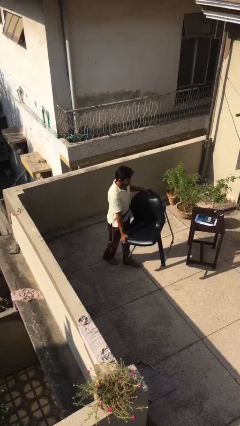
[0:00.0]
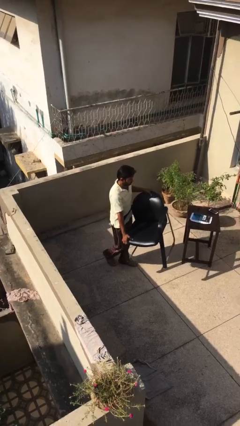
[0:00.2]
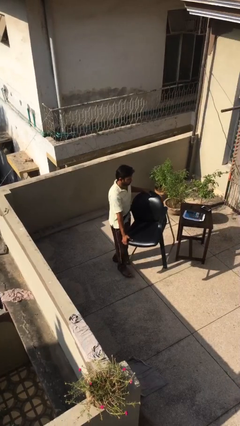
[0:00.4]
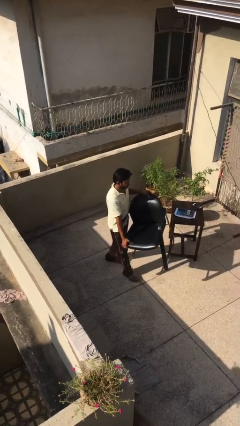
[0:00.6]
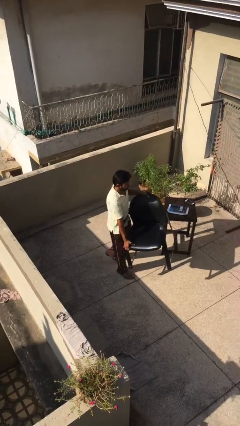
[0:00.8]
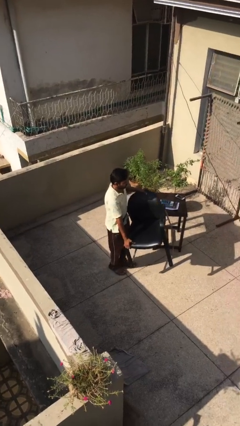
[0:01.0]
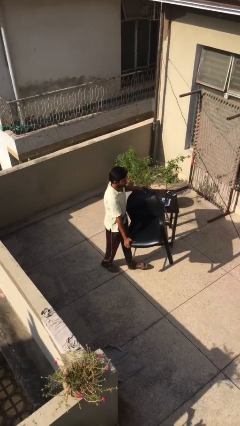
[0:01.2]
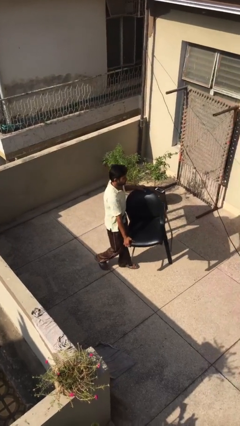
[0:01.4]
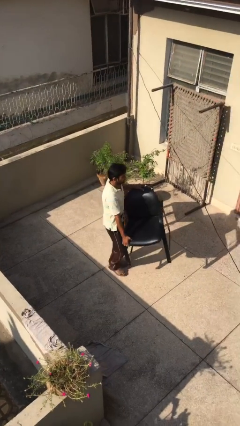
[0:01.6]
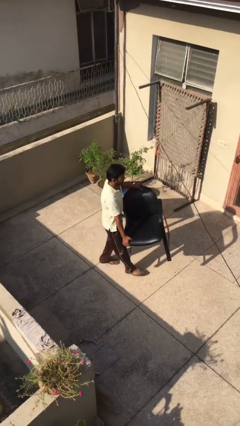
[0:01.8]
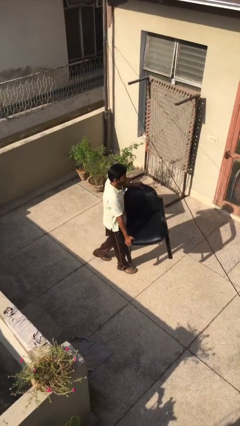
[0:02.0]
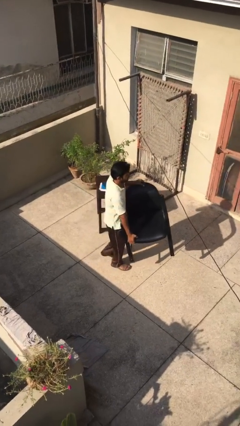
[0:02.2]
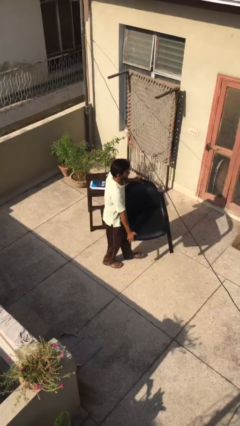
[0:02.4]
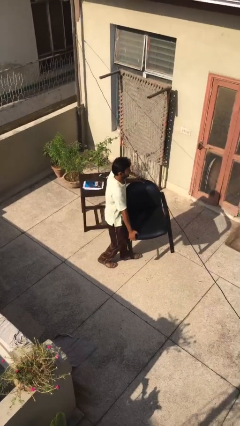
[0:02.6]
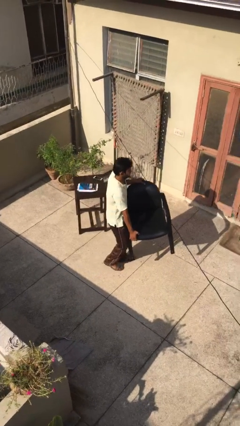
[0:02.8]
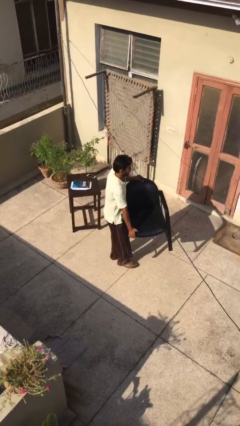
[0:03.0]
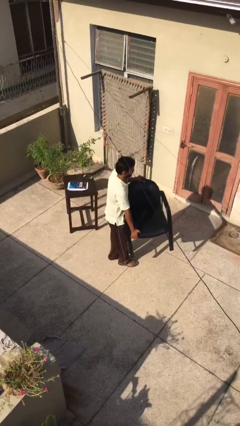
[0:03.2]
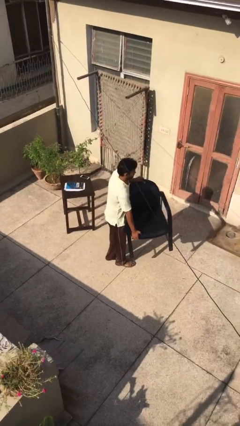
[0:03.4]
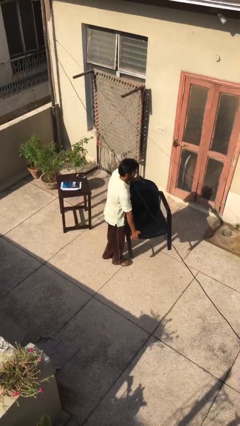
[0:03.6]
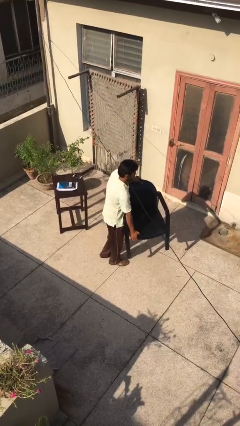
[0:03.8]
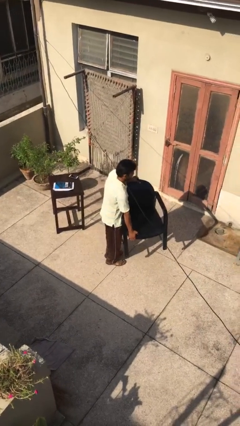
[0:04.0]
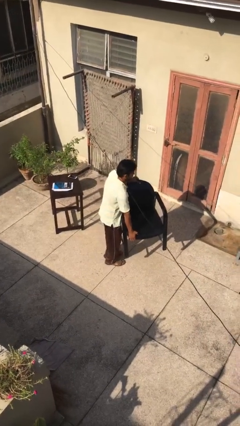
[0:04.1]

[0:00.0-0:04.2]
person carries heavy object

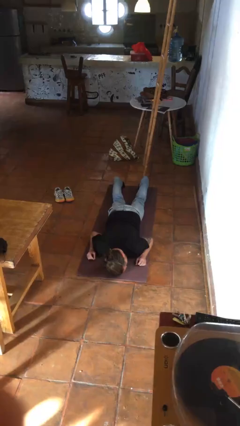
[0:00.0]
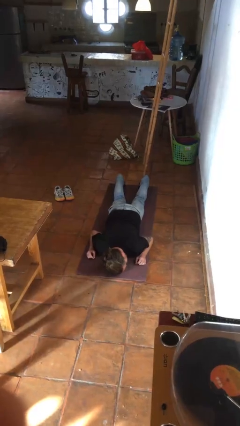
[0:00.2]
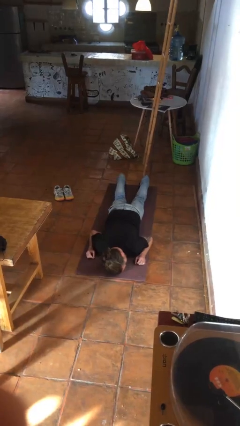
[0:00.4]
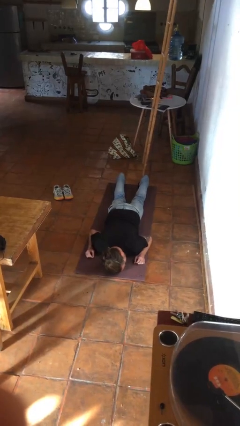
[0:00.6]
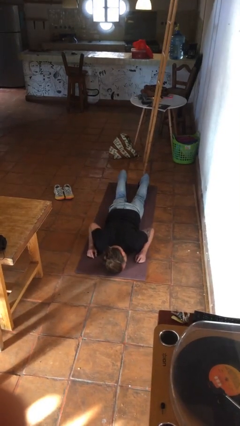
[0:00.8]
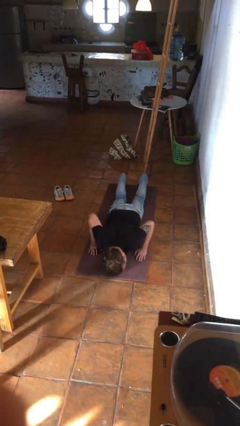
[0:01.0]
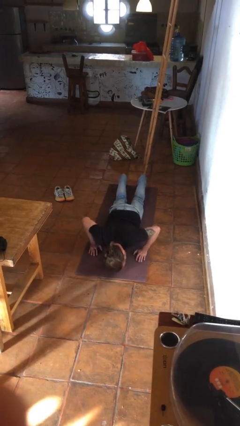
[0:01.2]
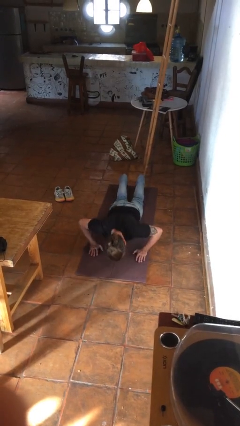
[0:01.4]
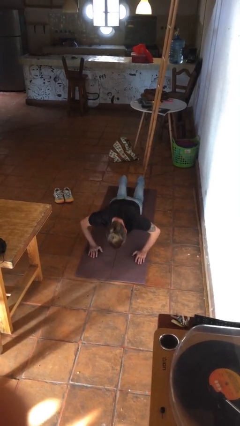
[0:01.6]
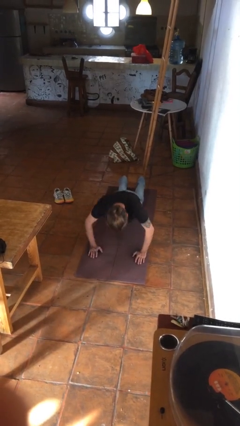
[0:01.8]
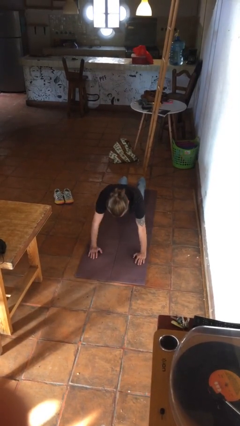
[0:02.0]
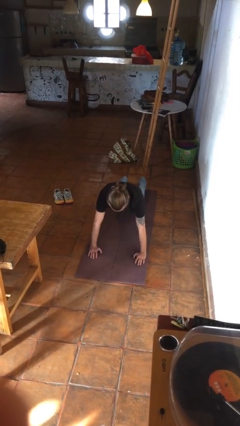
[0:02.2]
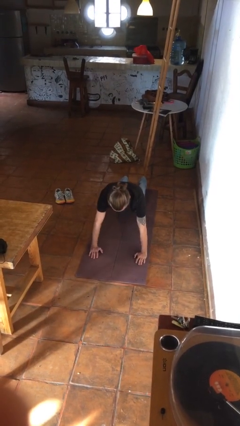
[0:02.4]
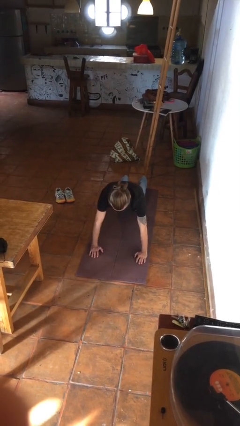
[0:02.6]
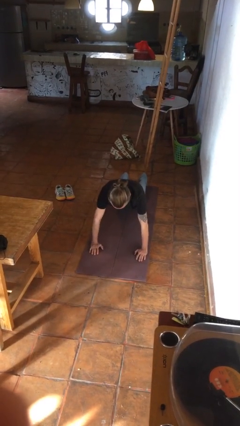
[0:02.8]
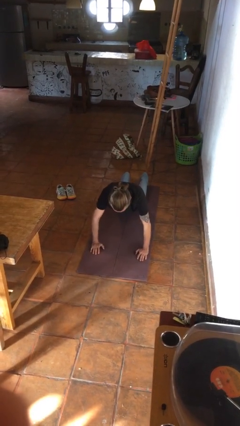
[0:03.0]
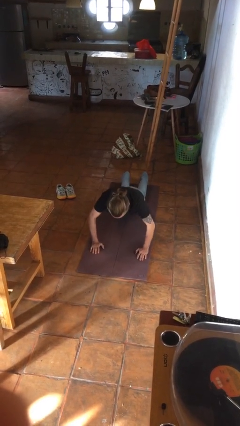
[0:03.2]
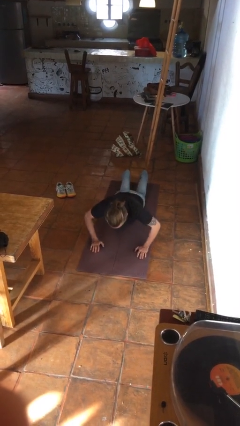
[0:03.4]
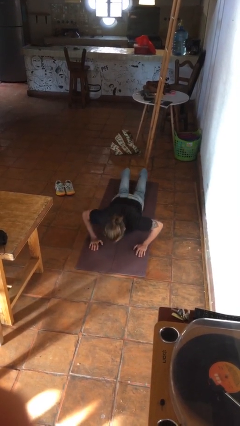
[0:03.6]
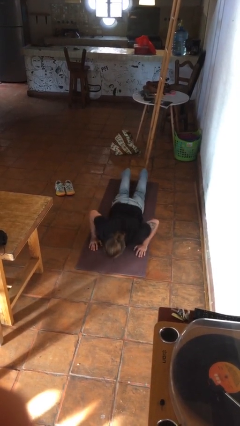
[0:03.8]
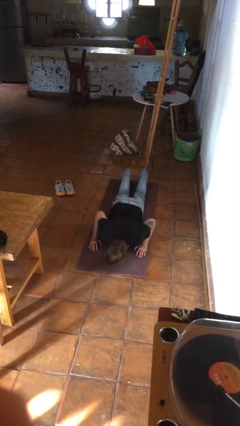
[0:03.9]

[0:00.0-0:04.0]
person exercises with pushup

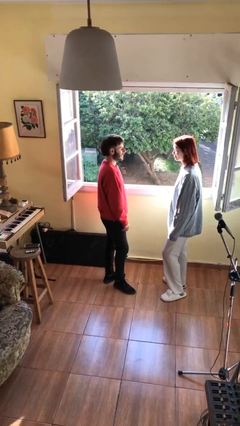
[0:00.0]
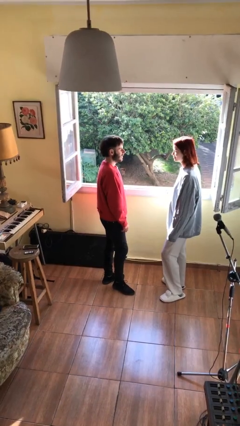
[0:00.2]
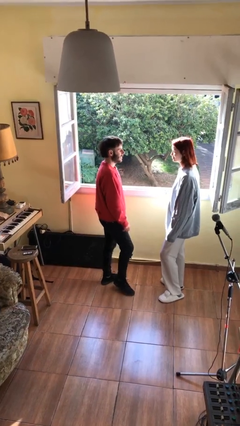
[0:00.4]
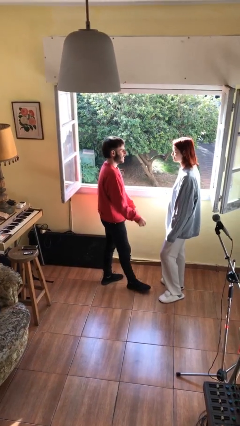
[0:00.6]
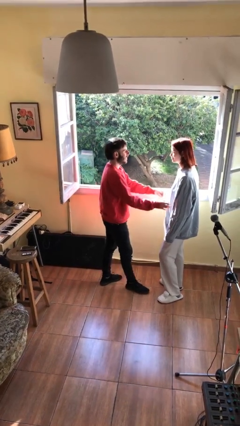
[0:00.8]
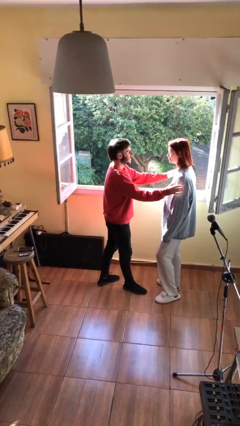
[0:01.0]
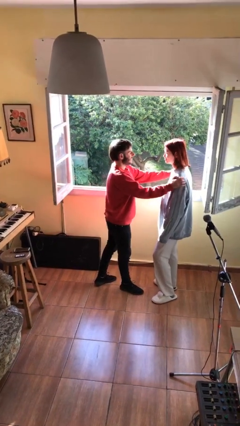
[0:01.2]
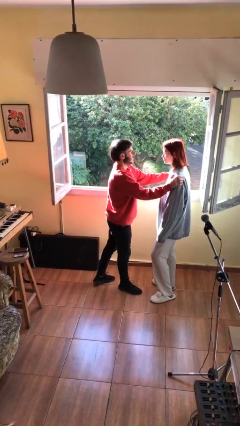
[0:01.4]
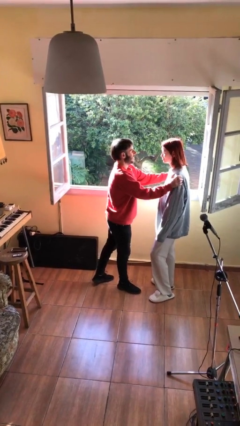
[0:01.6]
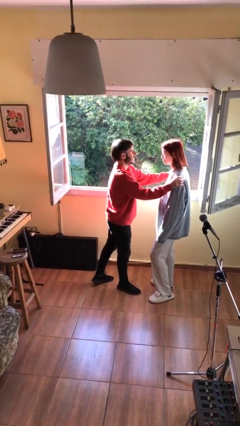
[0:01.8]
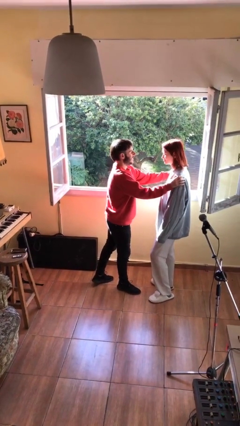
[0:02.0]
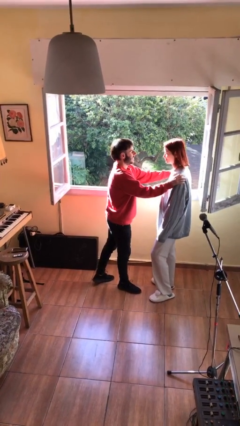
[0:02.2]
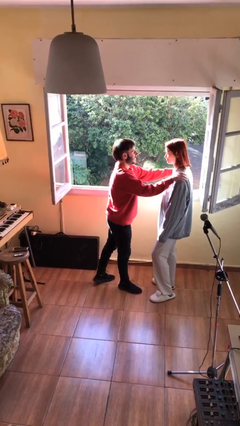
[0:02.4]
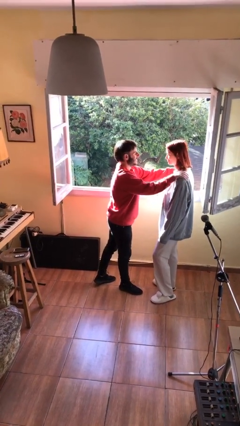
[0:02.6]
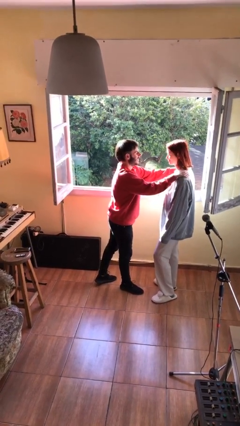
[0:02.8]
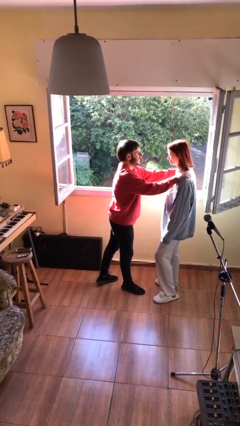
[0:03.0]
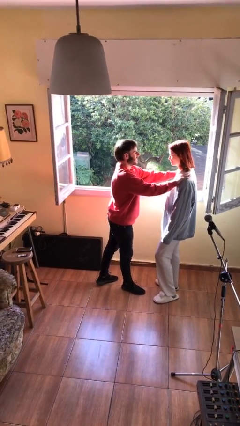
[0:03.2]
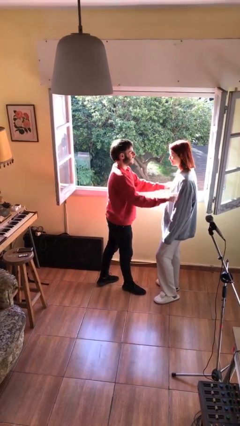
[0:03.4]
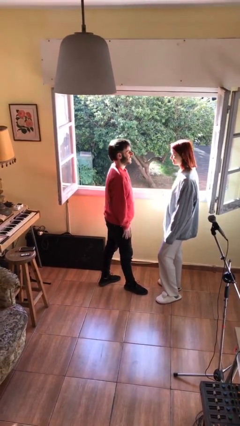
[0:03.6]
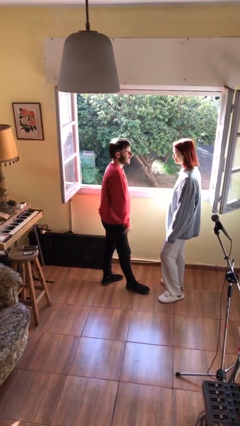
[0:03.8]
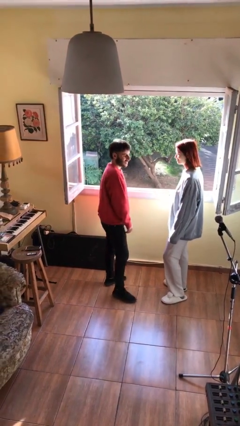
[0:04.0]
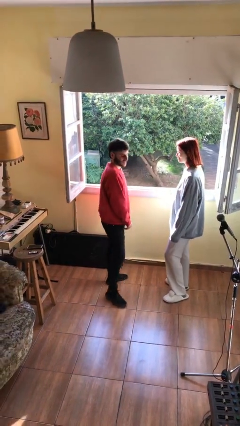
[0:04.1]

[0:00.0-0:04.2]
person pounds shoulders of person

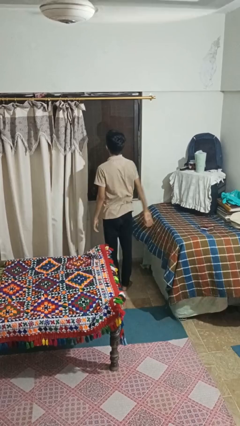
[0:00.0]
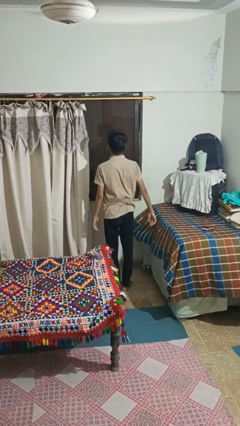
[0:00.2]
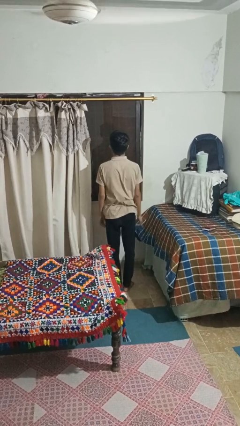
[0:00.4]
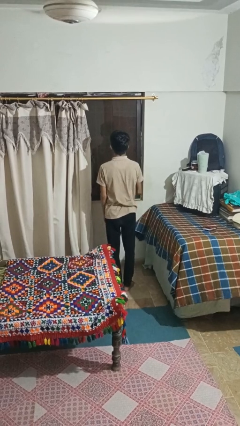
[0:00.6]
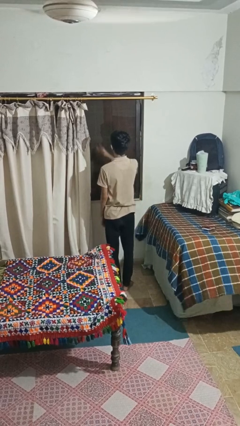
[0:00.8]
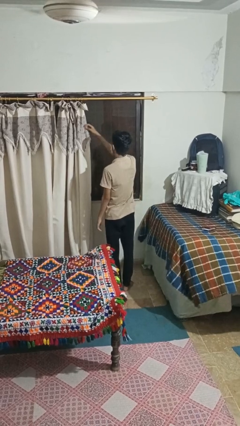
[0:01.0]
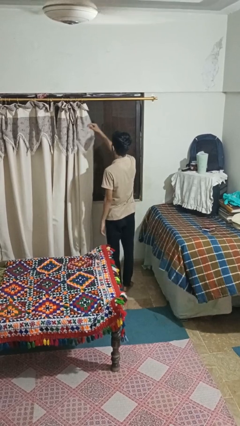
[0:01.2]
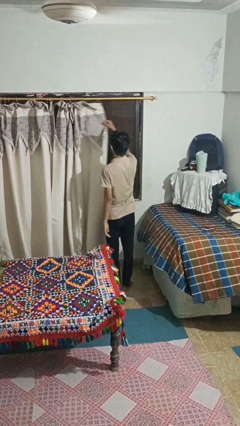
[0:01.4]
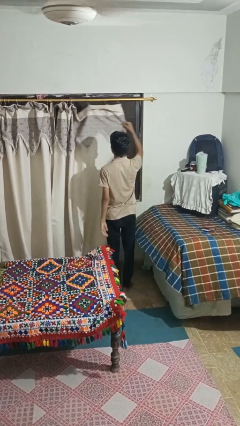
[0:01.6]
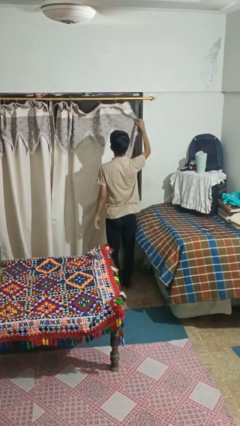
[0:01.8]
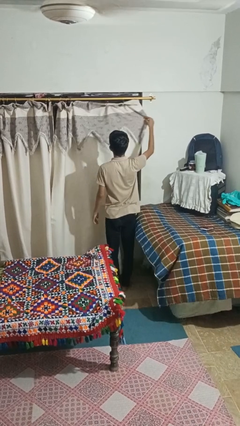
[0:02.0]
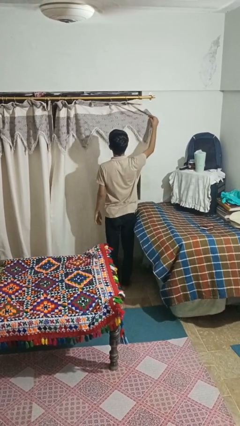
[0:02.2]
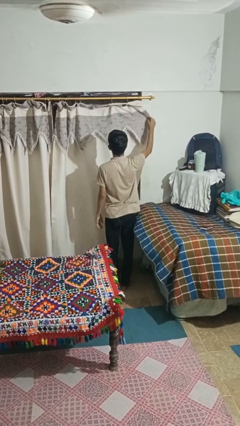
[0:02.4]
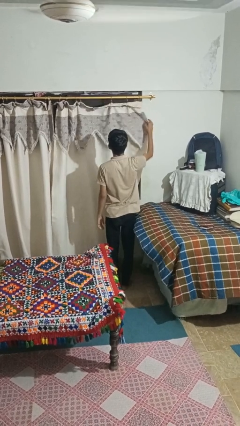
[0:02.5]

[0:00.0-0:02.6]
person closes curtains

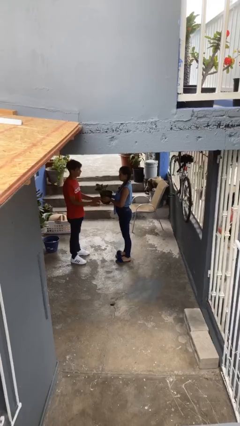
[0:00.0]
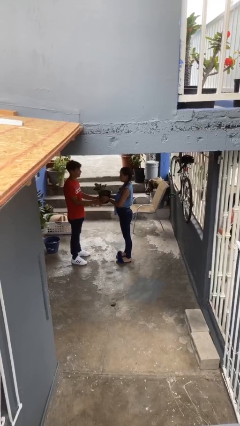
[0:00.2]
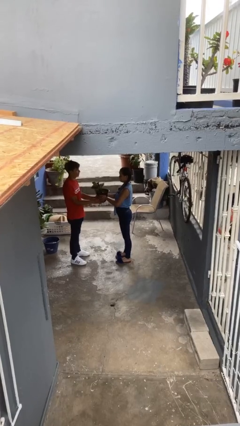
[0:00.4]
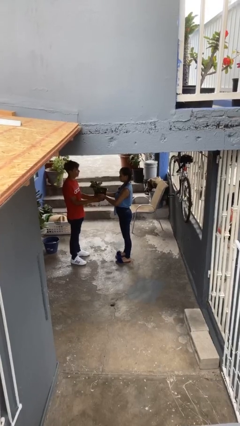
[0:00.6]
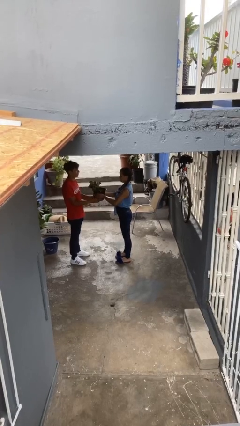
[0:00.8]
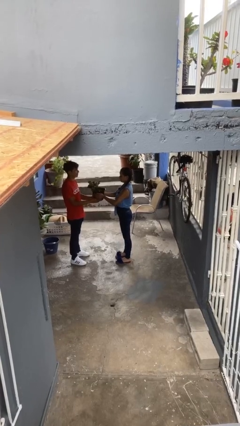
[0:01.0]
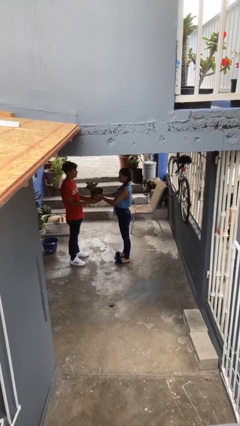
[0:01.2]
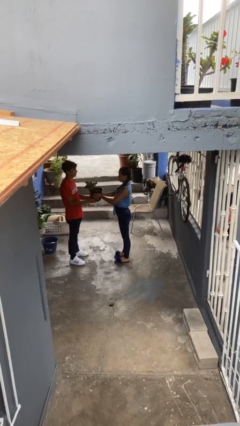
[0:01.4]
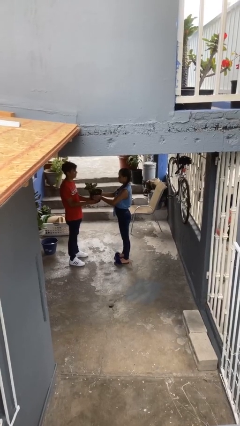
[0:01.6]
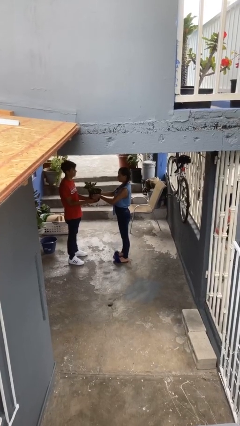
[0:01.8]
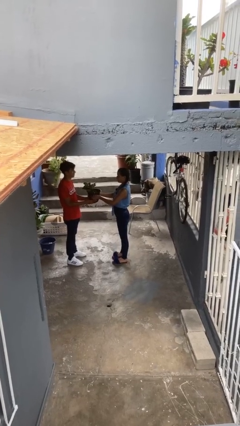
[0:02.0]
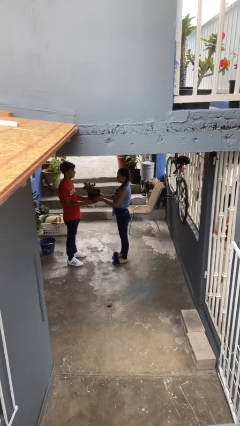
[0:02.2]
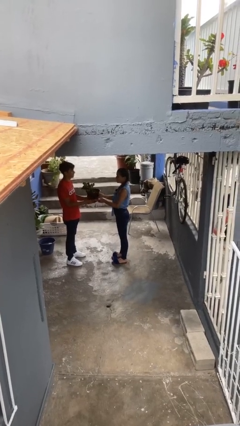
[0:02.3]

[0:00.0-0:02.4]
person transfers object to person

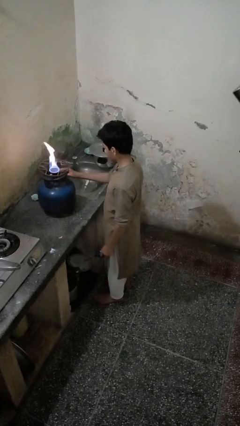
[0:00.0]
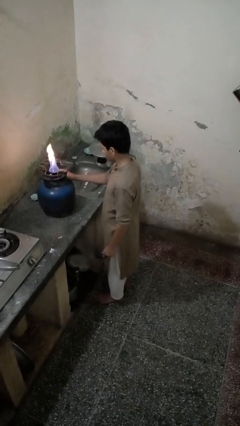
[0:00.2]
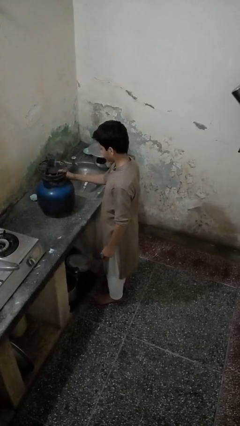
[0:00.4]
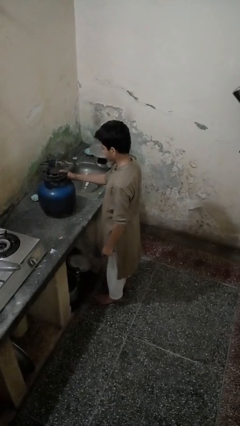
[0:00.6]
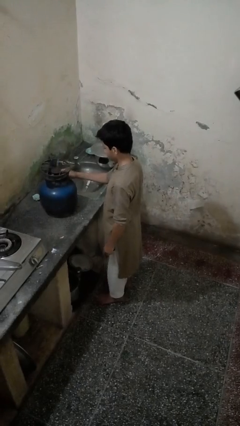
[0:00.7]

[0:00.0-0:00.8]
person turns off stovetop
